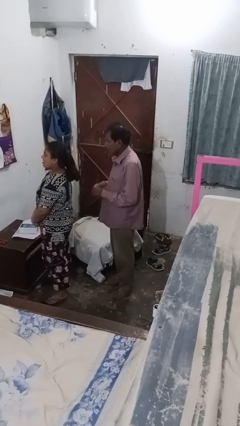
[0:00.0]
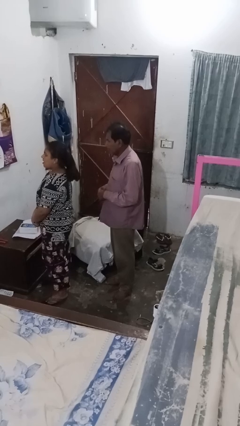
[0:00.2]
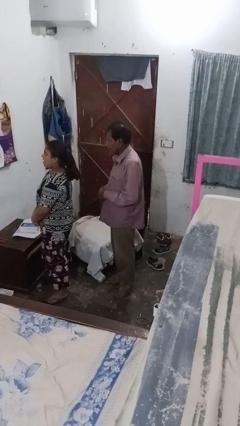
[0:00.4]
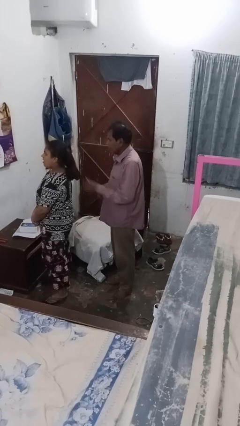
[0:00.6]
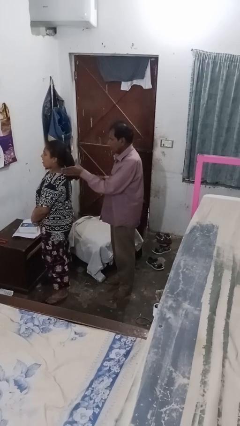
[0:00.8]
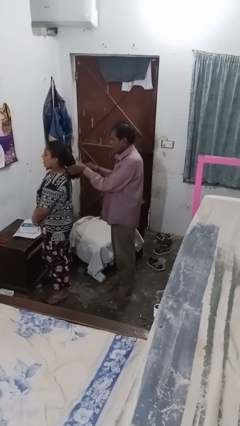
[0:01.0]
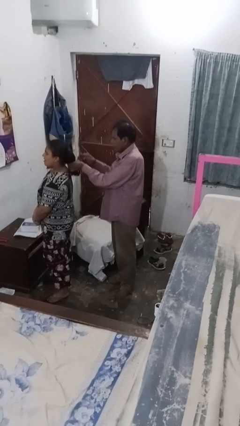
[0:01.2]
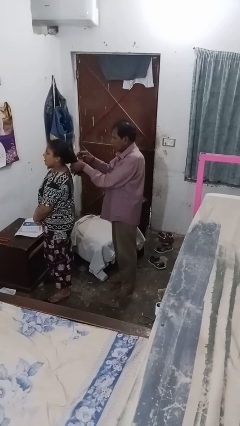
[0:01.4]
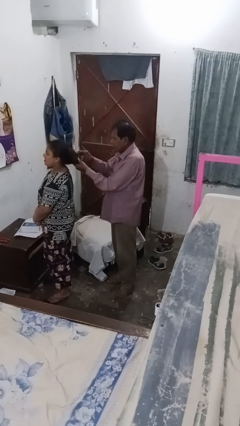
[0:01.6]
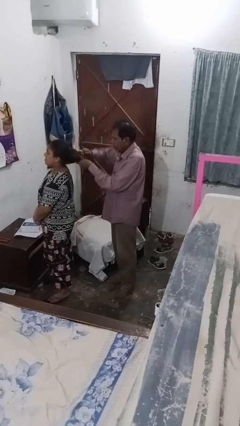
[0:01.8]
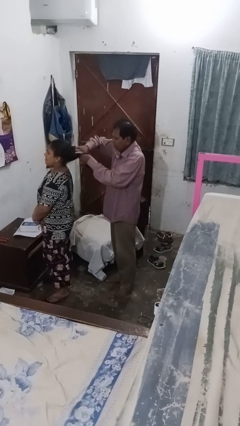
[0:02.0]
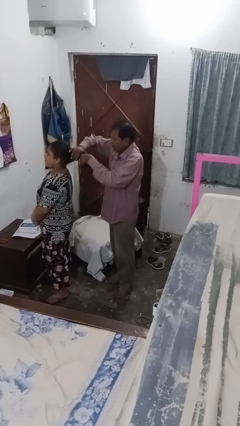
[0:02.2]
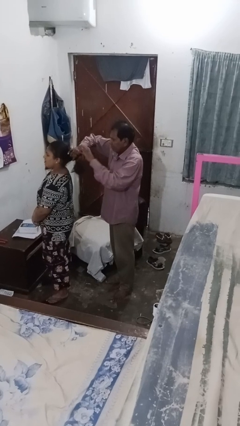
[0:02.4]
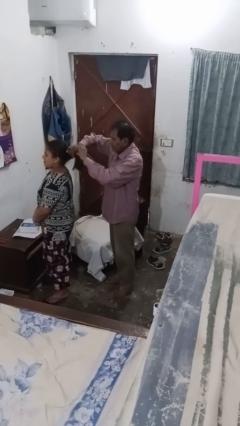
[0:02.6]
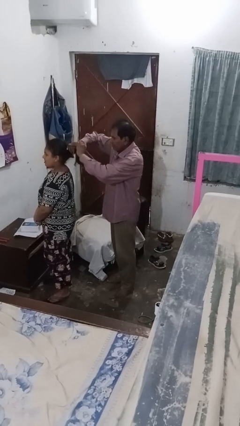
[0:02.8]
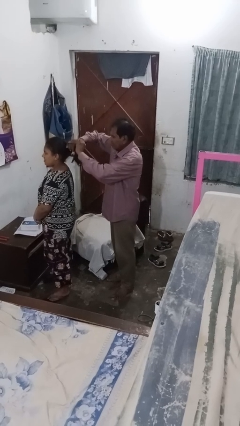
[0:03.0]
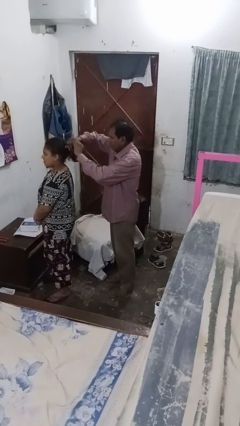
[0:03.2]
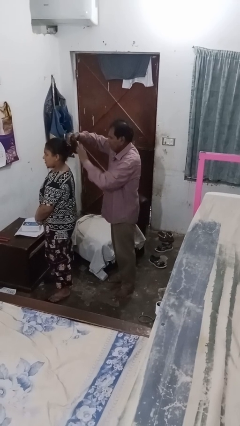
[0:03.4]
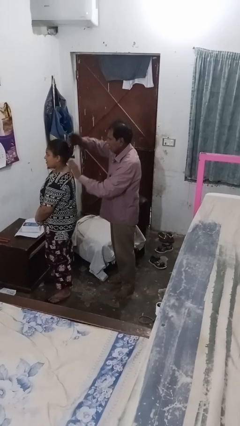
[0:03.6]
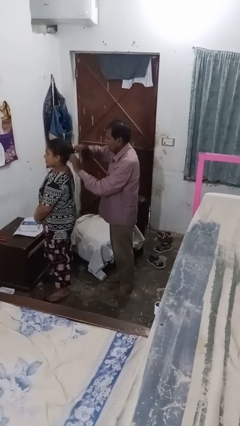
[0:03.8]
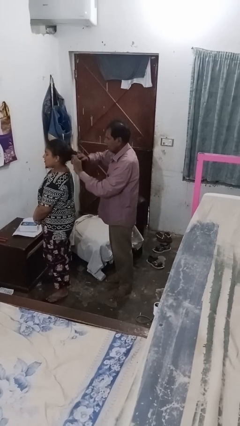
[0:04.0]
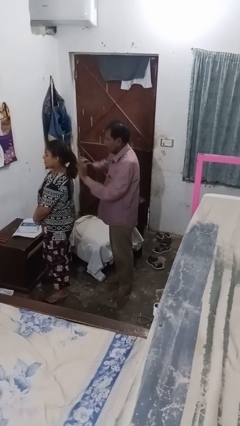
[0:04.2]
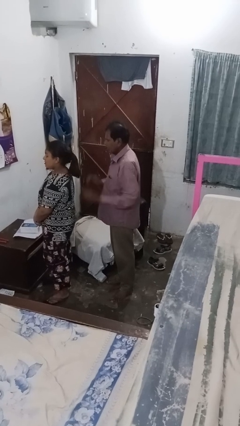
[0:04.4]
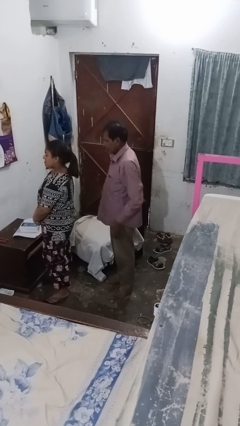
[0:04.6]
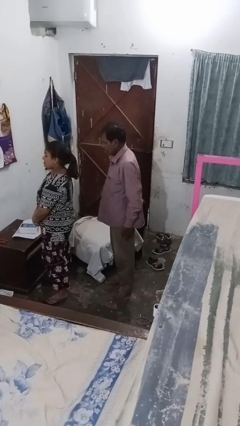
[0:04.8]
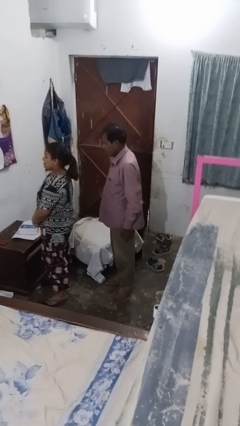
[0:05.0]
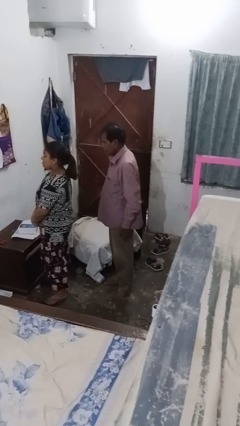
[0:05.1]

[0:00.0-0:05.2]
person braids hair of person

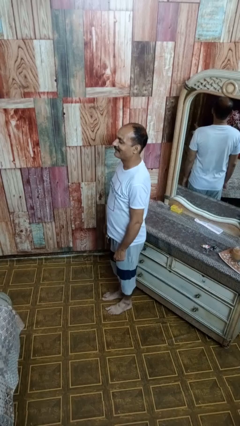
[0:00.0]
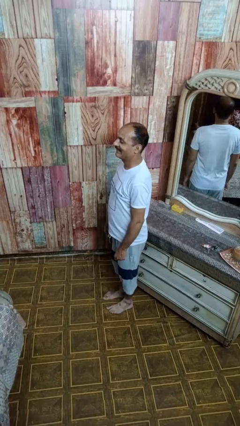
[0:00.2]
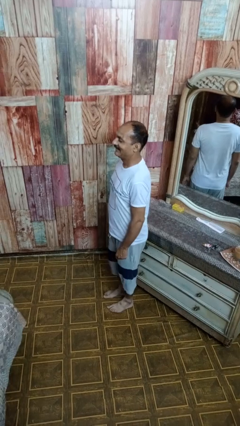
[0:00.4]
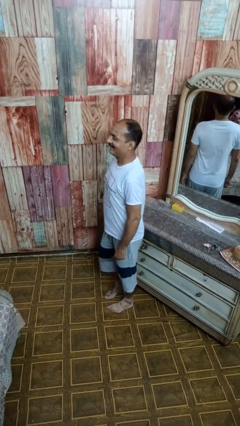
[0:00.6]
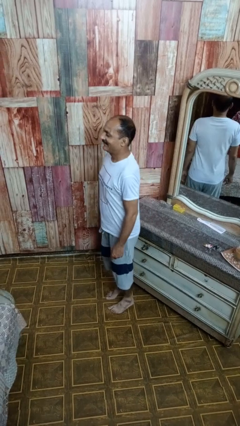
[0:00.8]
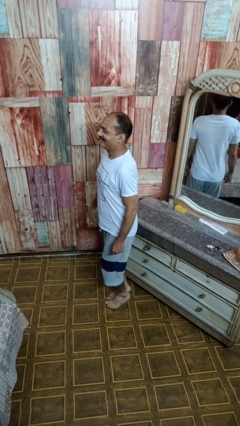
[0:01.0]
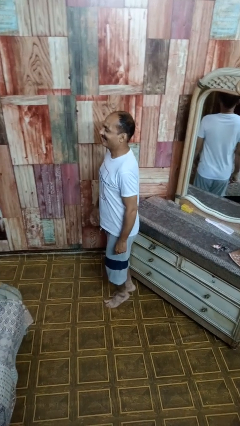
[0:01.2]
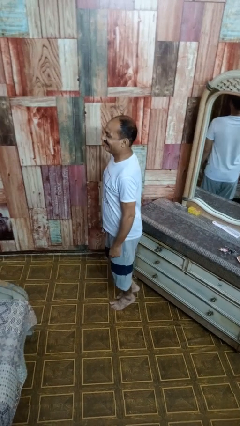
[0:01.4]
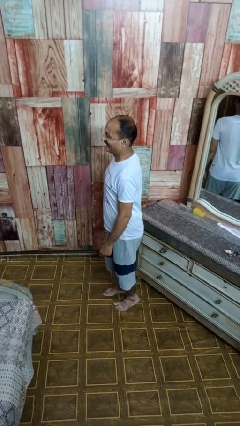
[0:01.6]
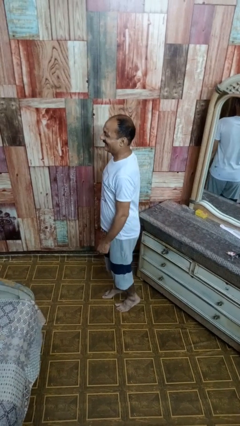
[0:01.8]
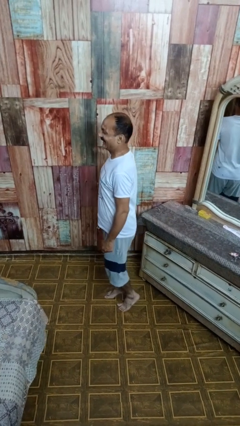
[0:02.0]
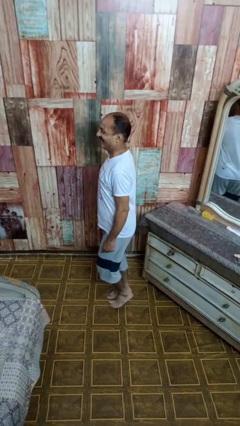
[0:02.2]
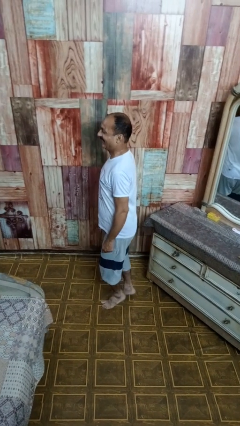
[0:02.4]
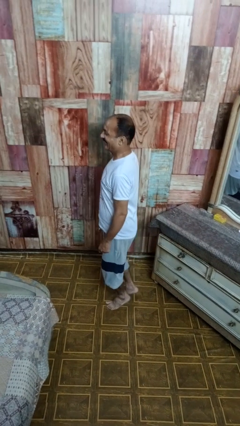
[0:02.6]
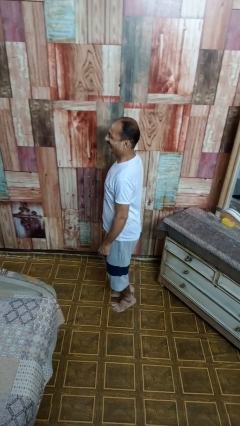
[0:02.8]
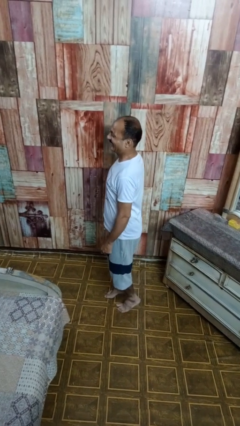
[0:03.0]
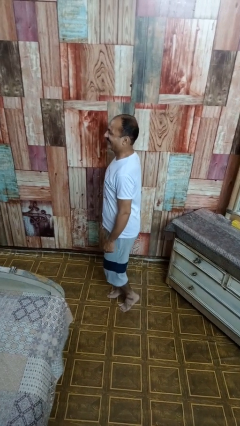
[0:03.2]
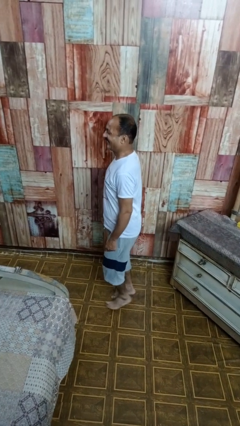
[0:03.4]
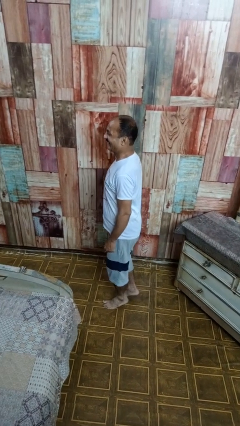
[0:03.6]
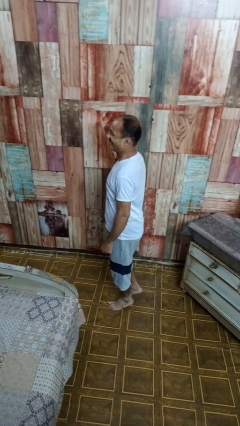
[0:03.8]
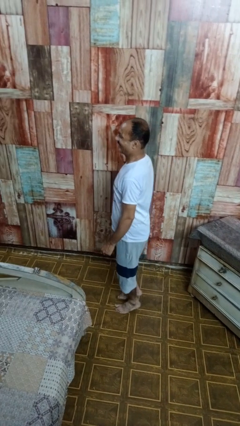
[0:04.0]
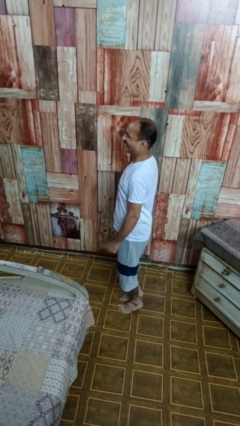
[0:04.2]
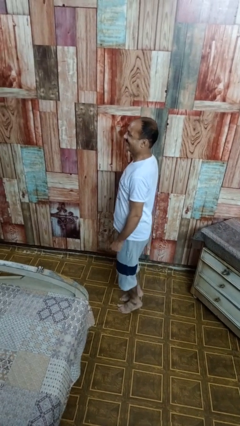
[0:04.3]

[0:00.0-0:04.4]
person walks tiptoe

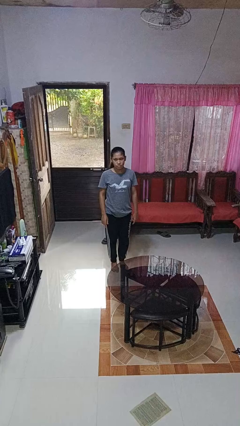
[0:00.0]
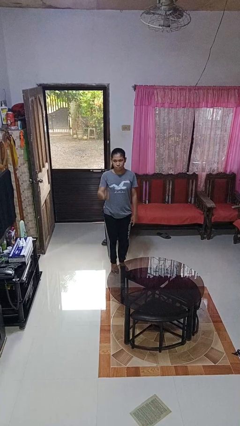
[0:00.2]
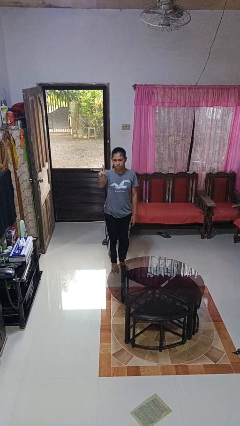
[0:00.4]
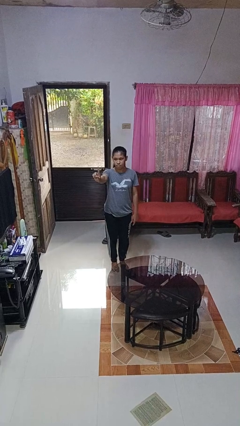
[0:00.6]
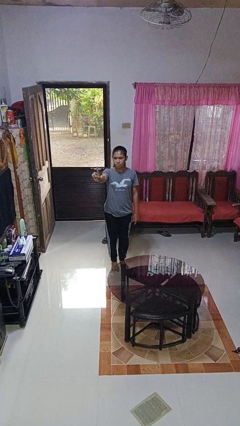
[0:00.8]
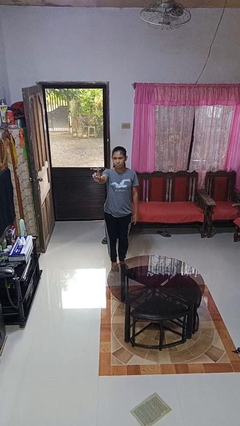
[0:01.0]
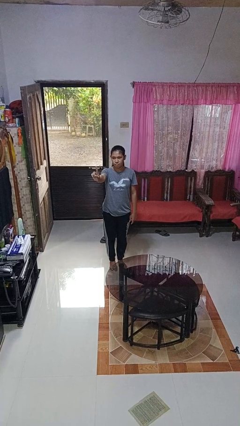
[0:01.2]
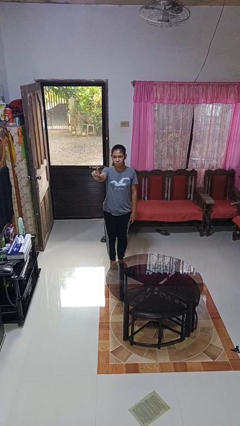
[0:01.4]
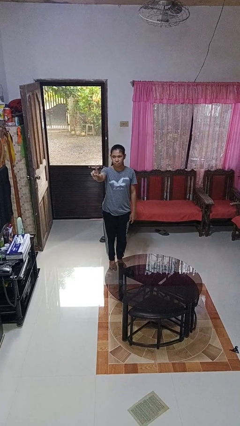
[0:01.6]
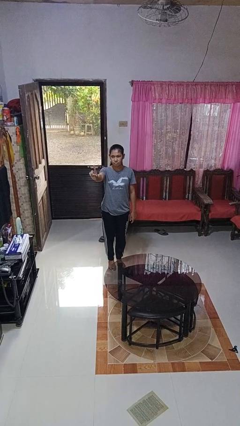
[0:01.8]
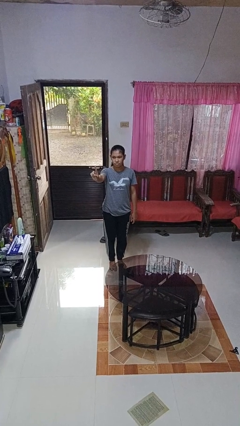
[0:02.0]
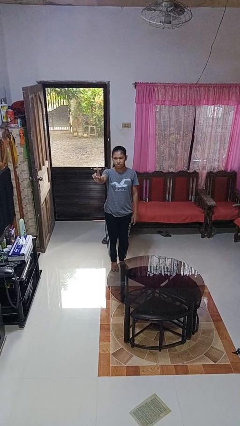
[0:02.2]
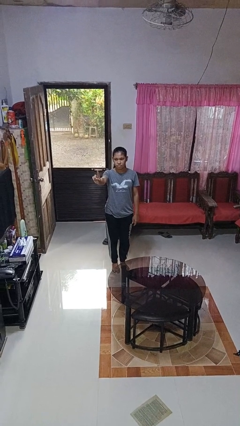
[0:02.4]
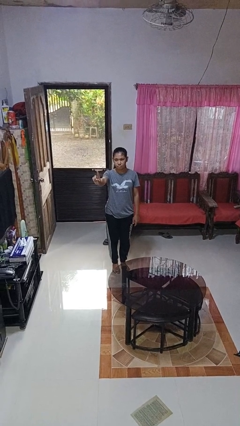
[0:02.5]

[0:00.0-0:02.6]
person gestures number one

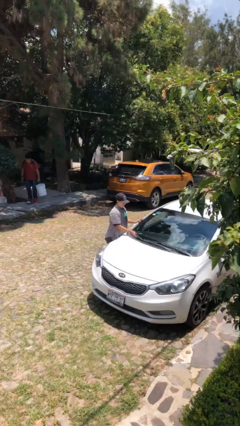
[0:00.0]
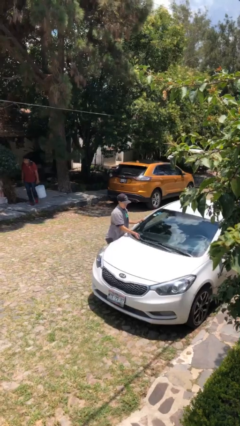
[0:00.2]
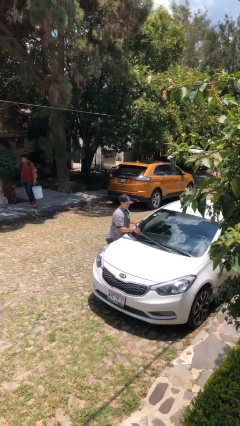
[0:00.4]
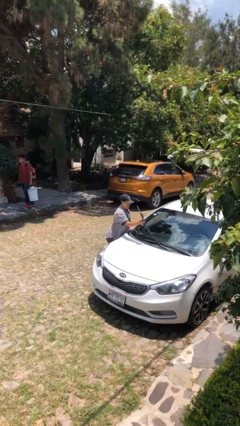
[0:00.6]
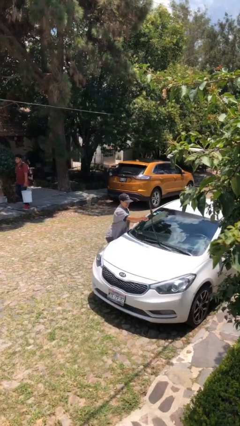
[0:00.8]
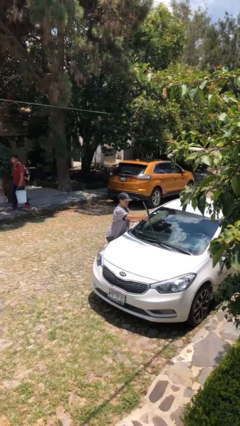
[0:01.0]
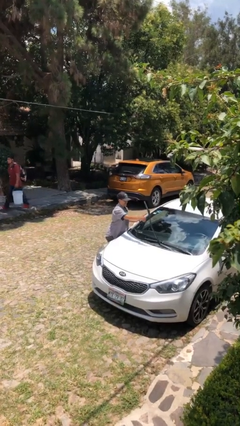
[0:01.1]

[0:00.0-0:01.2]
person flips up car wipers

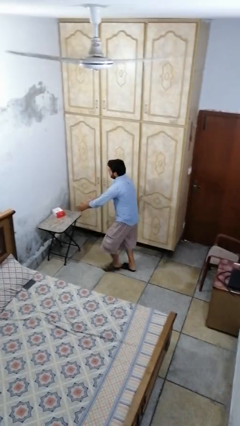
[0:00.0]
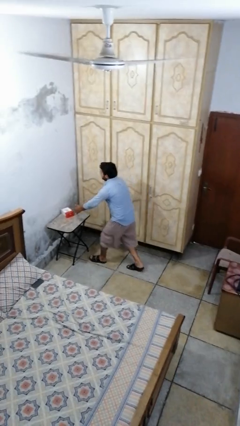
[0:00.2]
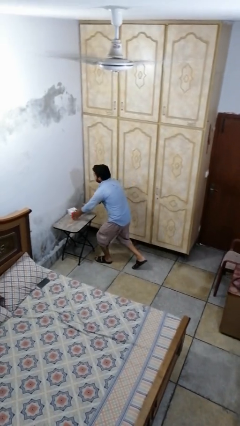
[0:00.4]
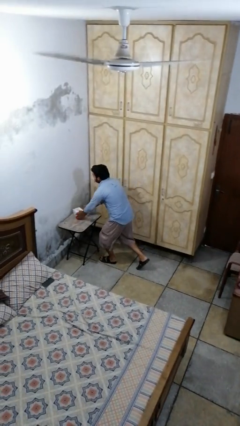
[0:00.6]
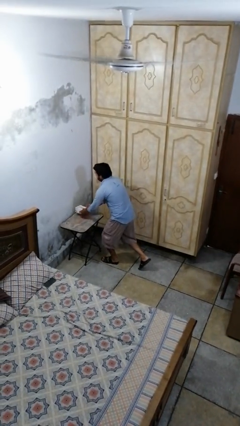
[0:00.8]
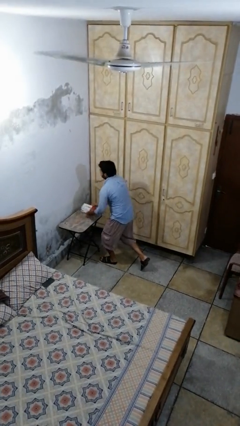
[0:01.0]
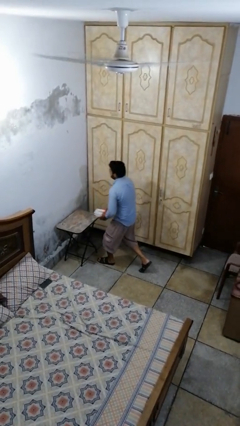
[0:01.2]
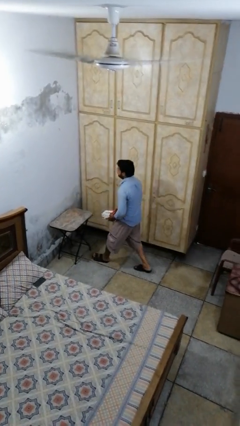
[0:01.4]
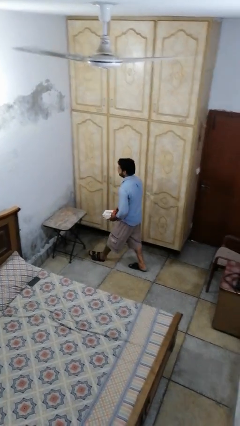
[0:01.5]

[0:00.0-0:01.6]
person picks up object from table

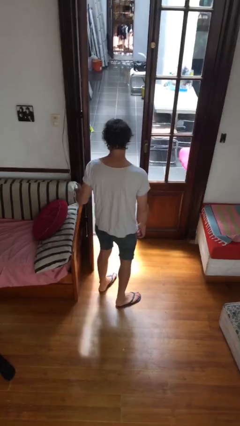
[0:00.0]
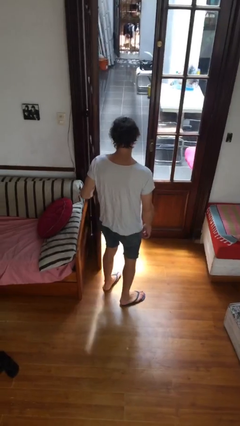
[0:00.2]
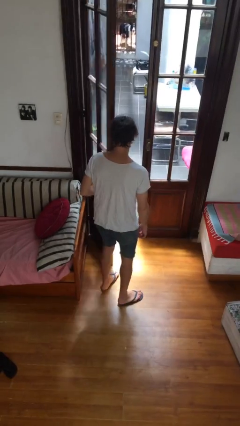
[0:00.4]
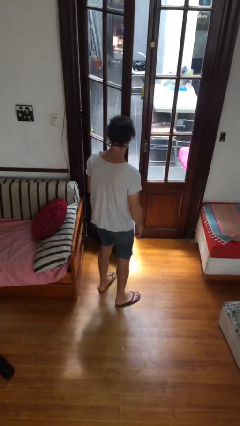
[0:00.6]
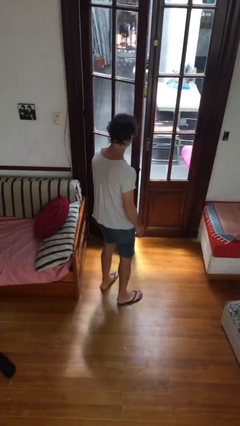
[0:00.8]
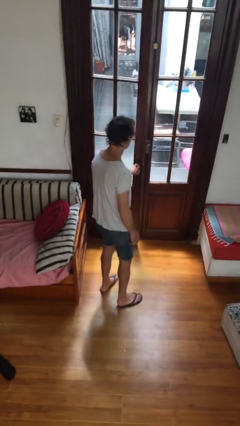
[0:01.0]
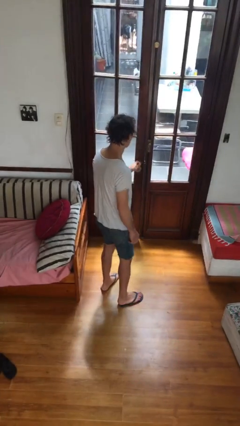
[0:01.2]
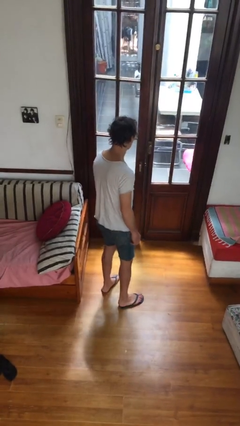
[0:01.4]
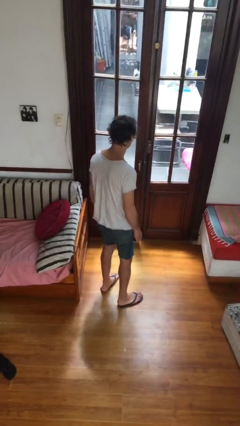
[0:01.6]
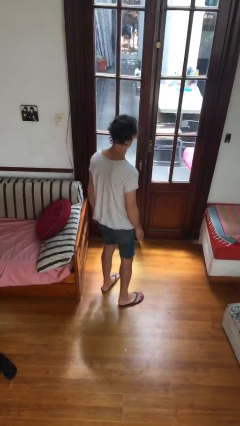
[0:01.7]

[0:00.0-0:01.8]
person closes facility door

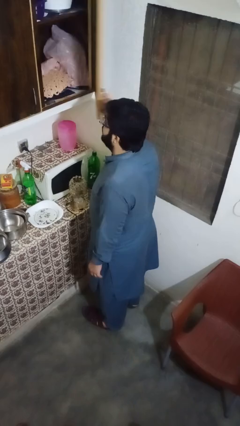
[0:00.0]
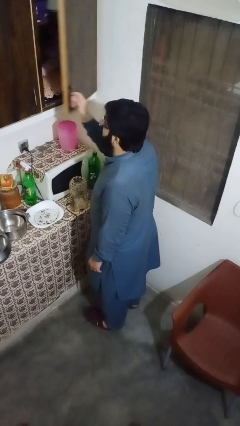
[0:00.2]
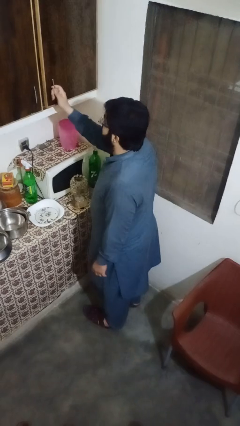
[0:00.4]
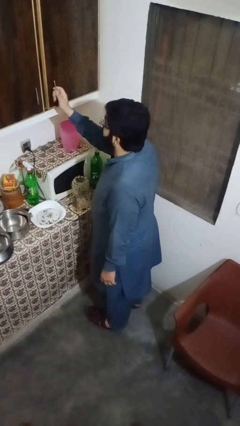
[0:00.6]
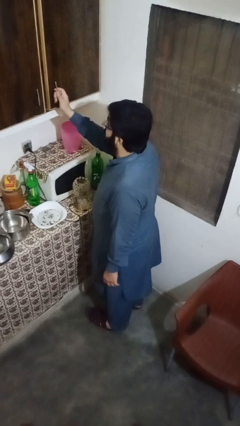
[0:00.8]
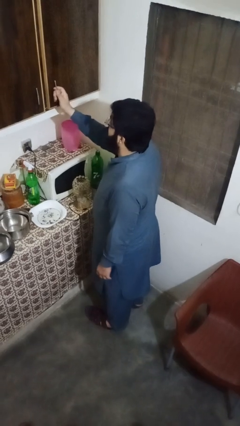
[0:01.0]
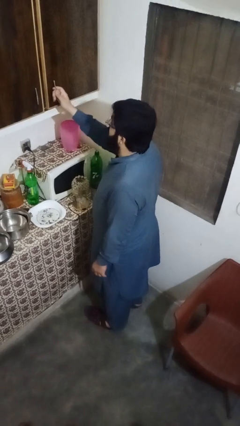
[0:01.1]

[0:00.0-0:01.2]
person closes cabinet
